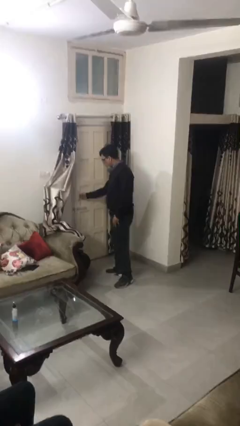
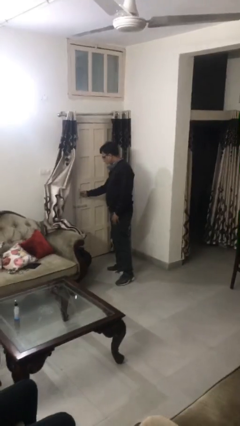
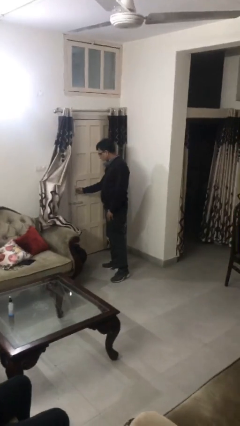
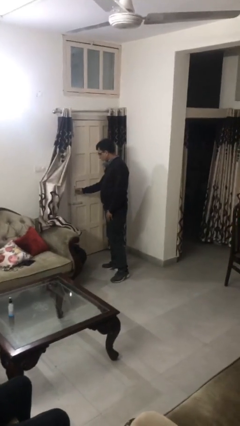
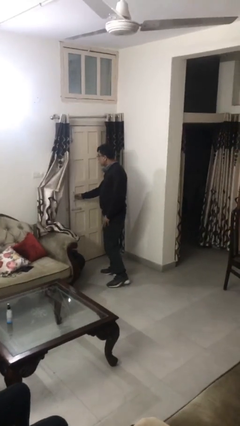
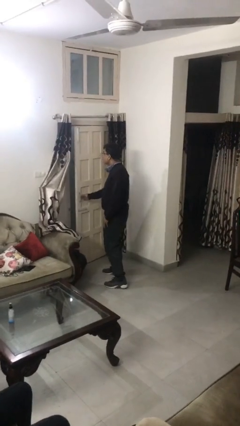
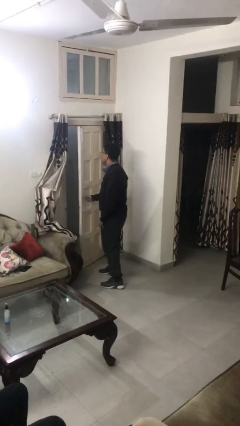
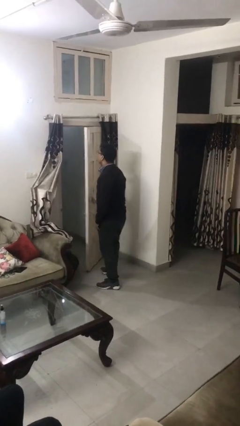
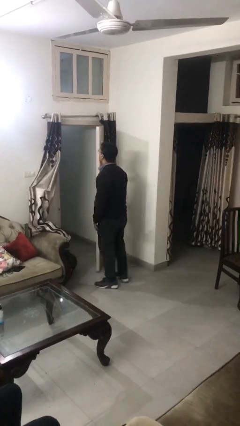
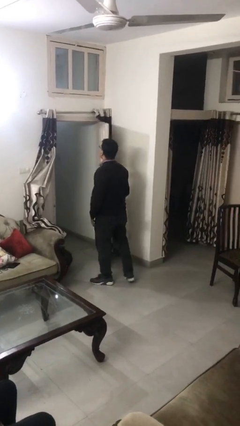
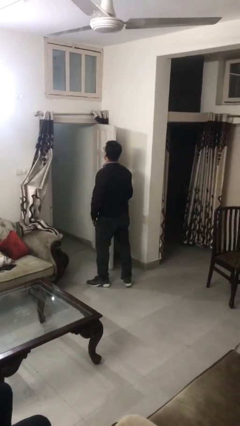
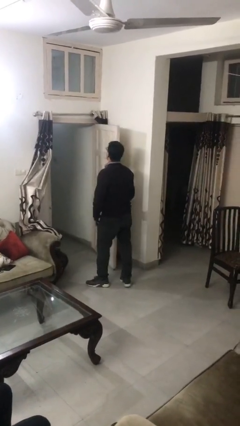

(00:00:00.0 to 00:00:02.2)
person opens facility door

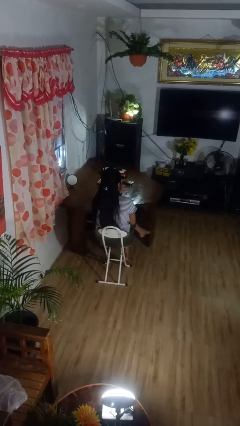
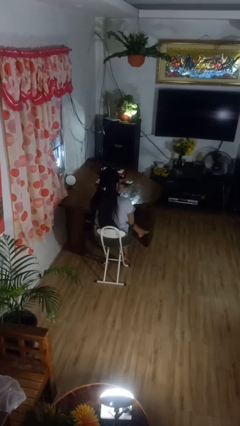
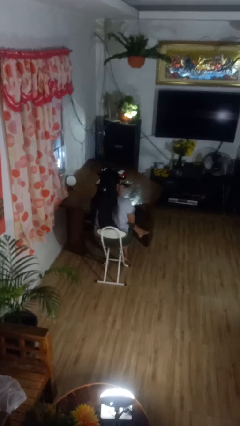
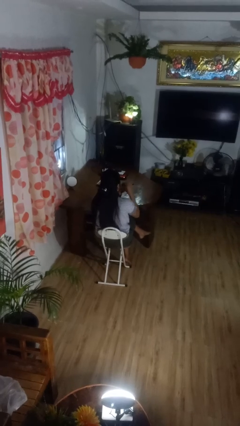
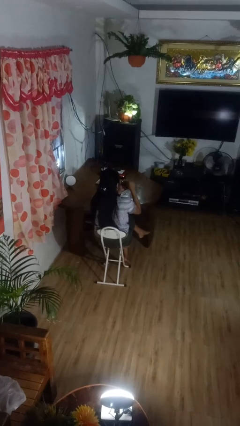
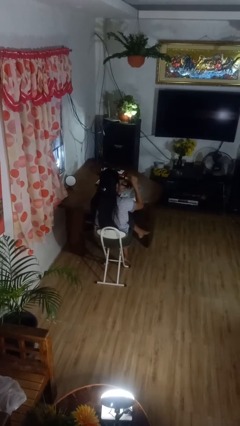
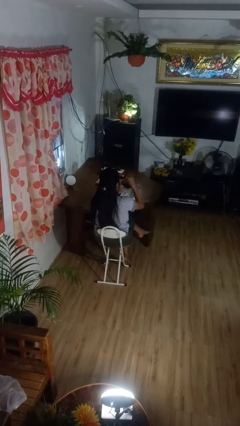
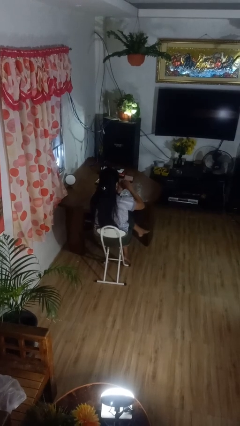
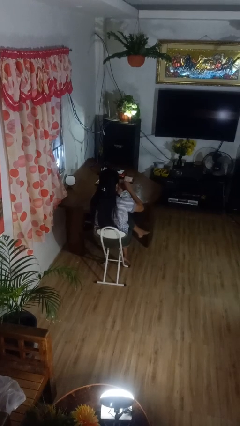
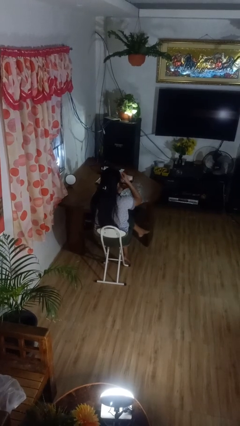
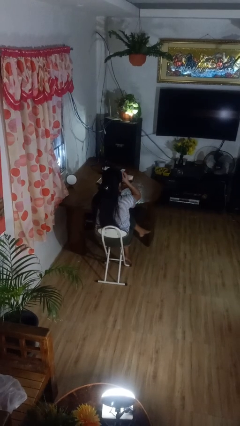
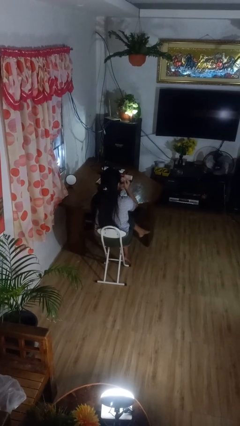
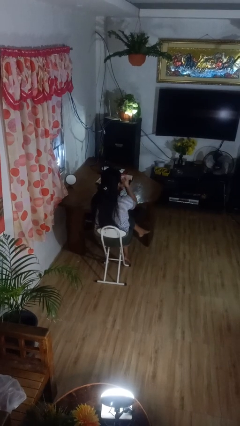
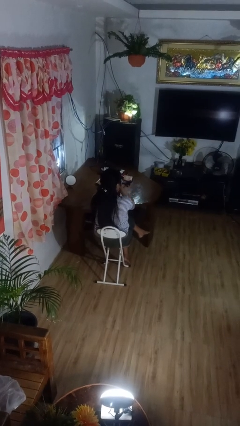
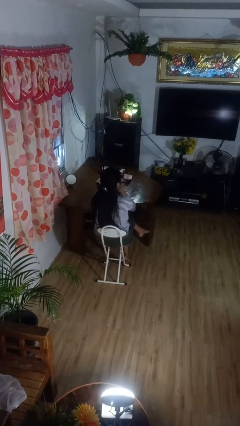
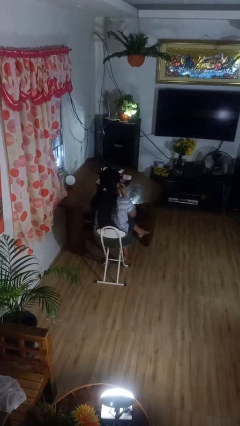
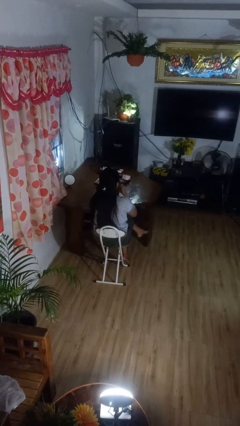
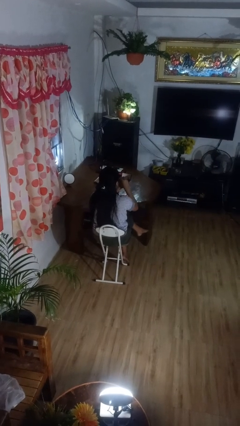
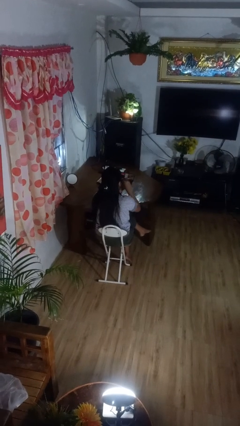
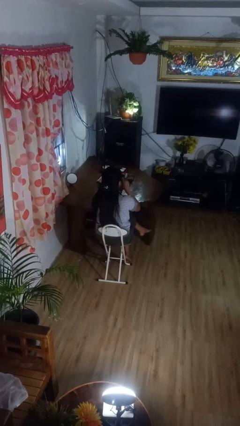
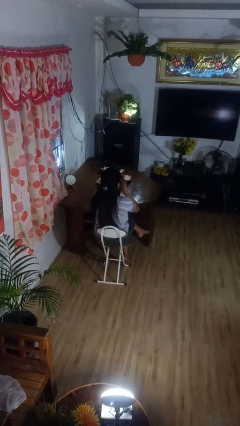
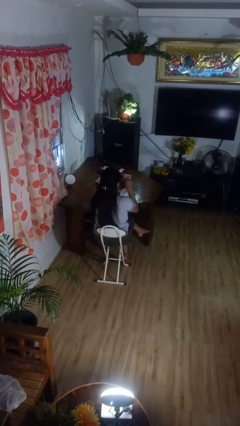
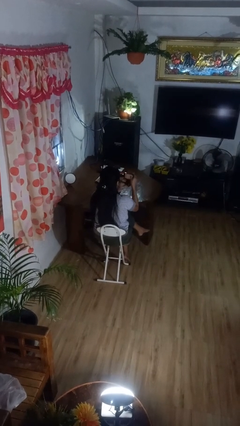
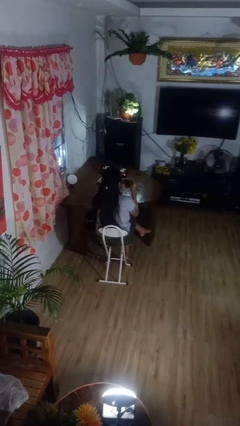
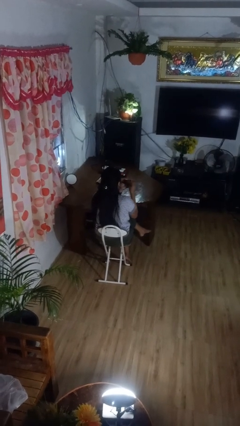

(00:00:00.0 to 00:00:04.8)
person applies foundation makeup

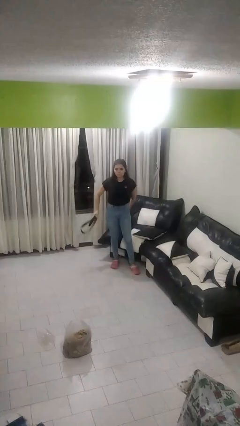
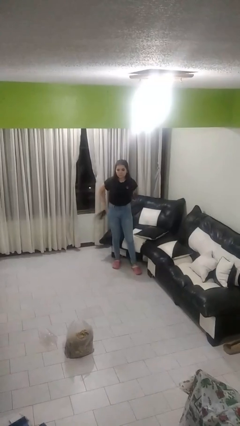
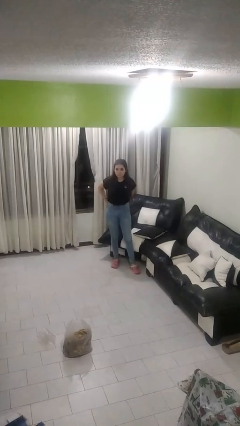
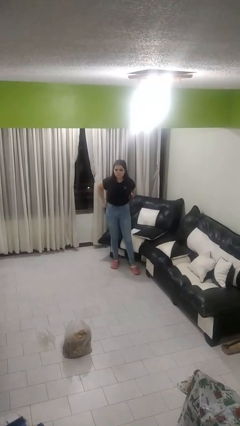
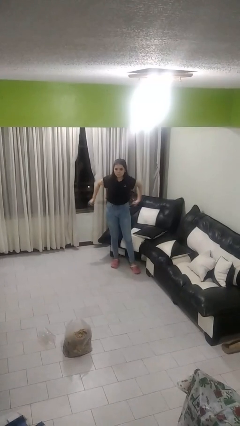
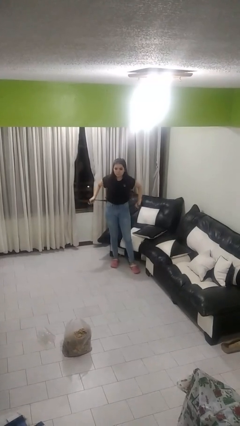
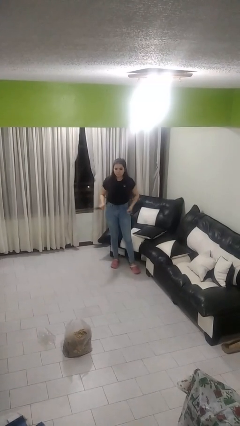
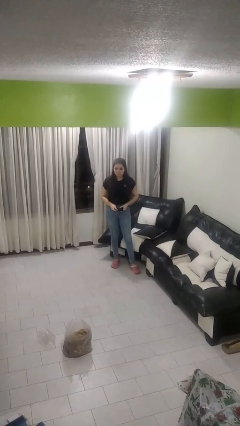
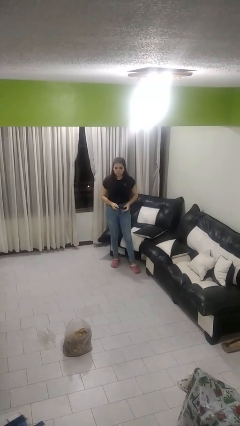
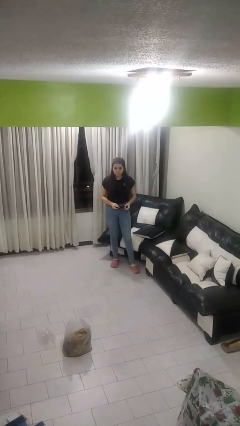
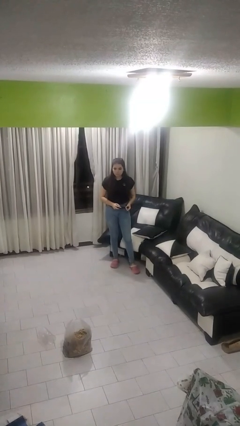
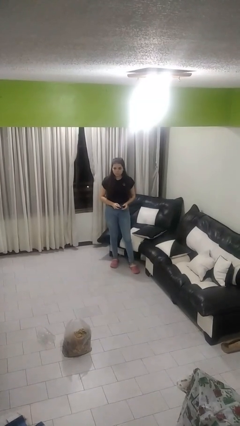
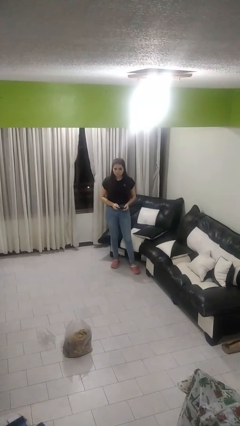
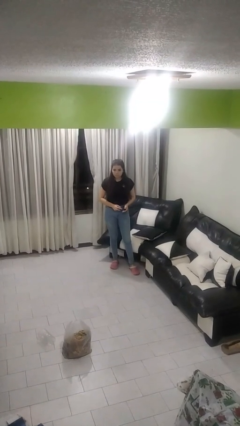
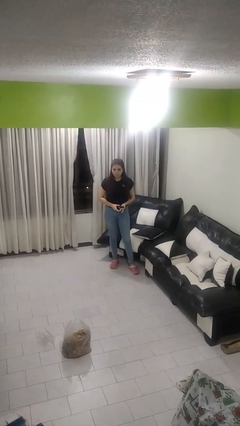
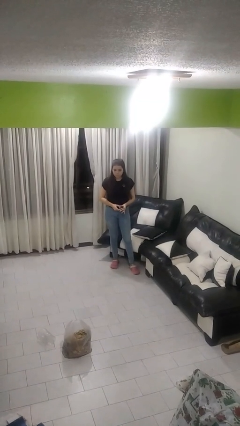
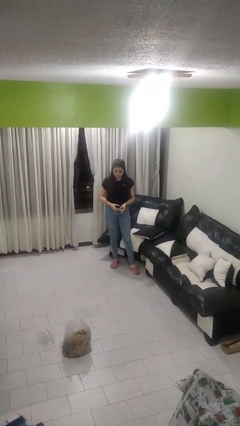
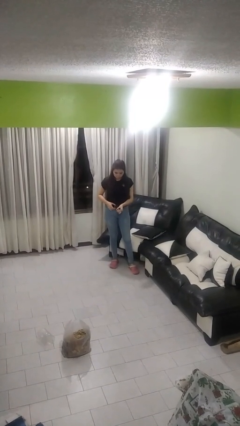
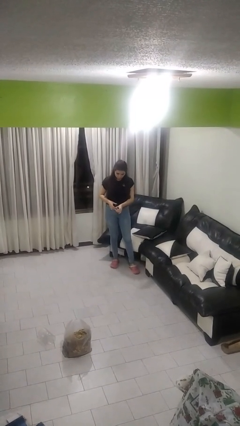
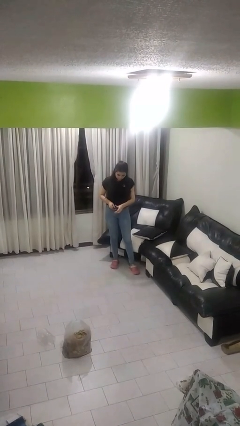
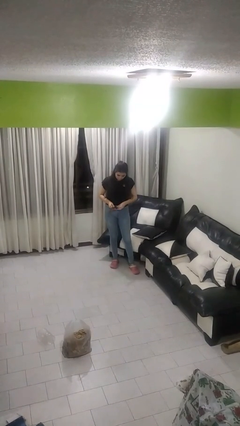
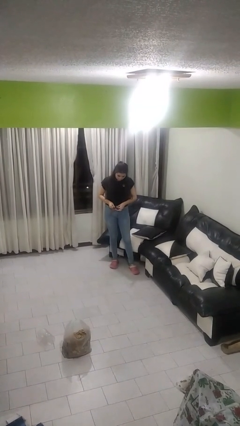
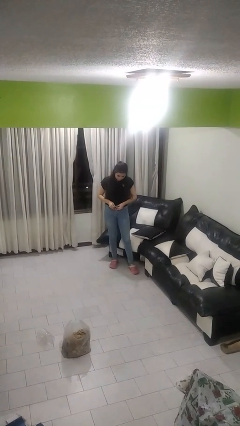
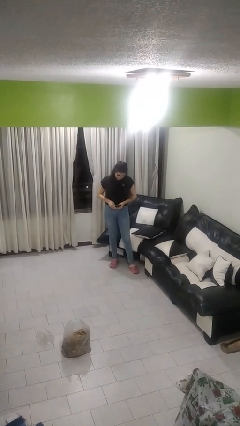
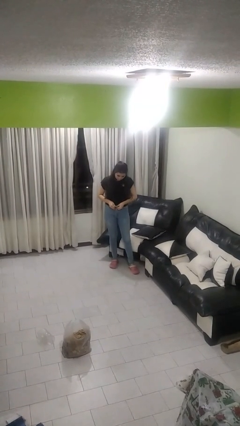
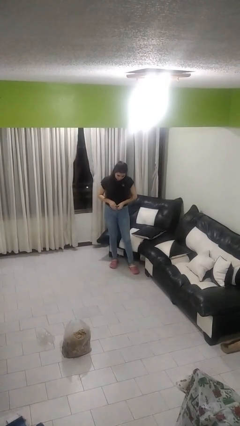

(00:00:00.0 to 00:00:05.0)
person puts on belt

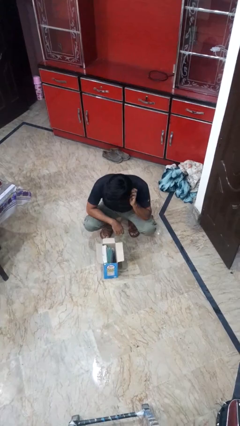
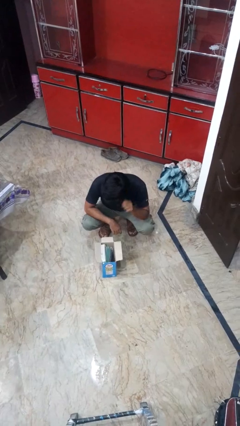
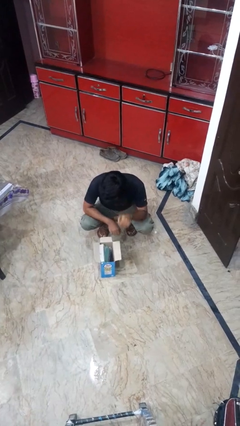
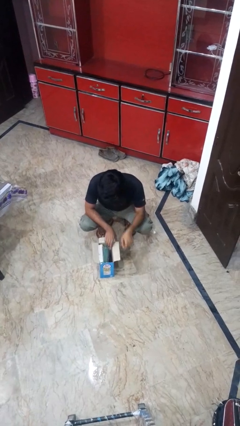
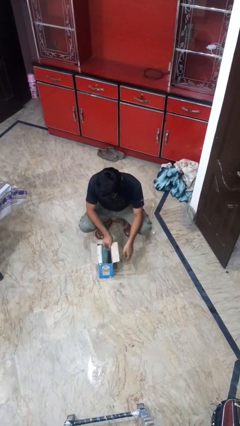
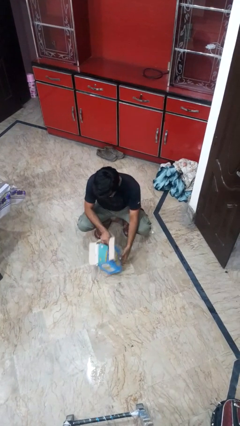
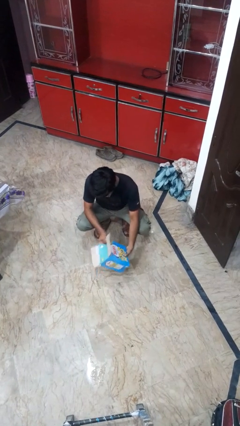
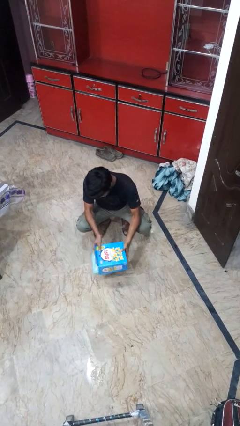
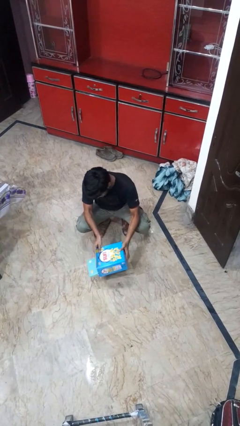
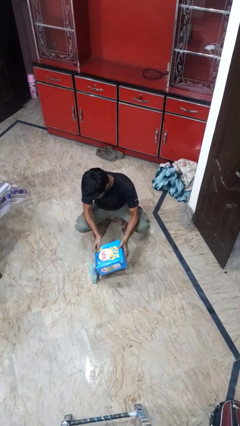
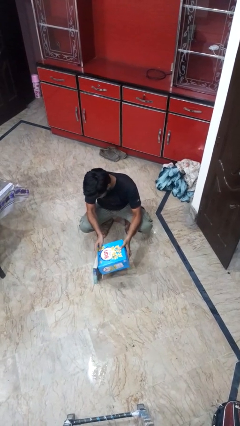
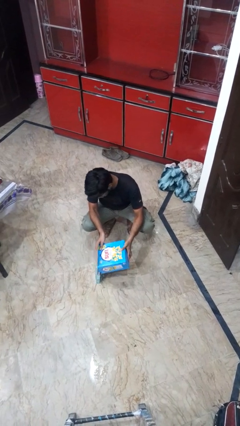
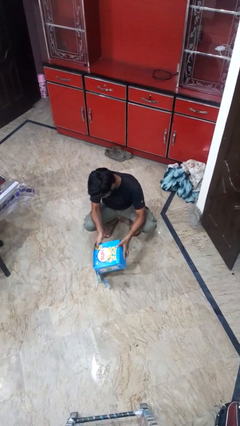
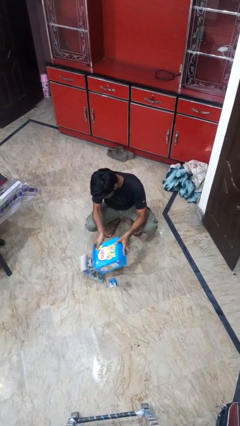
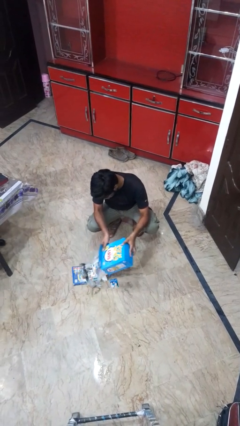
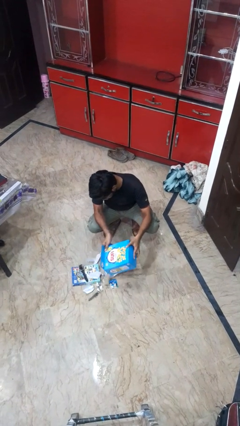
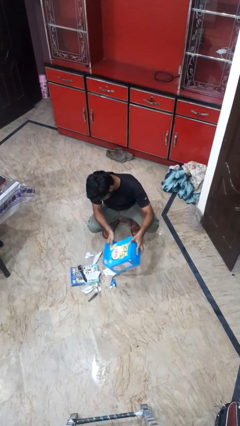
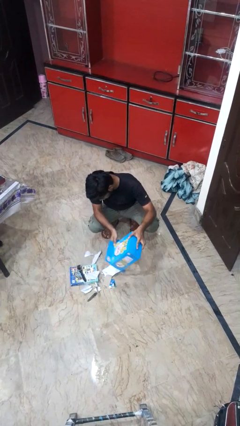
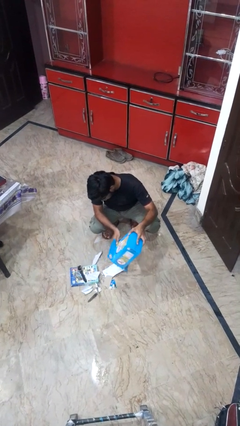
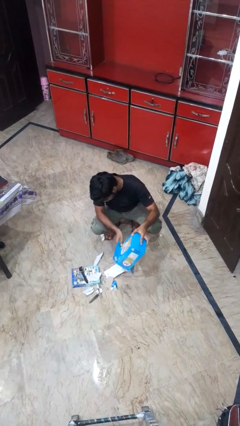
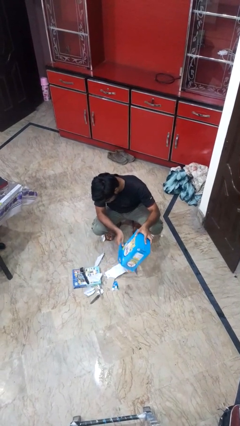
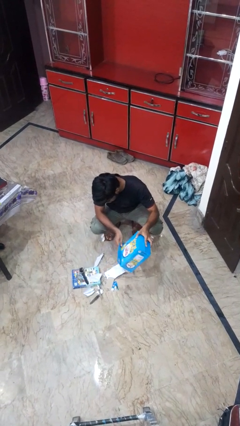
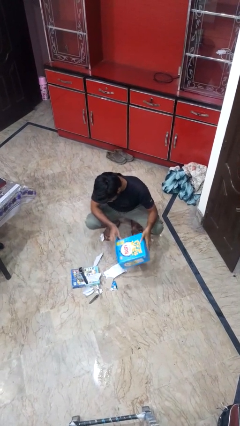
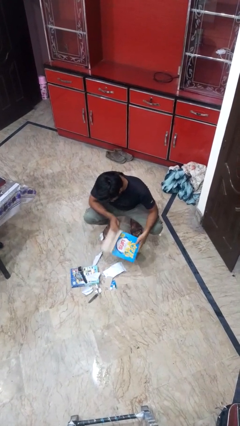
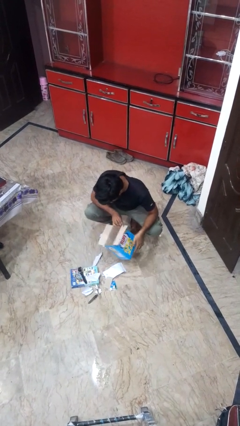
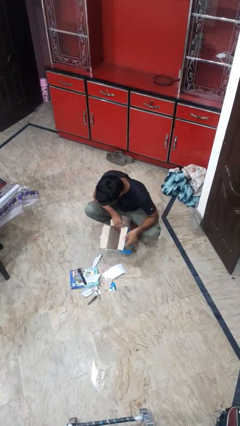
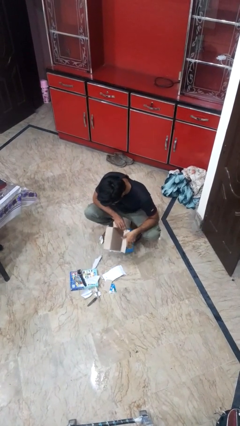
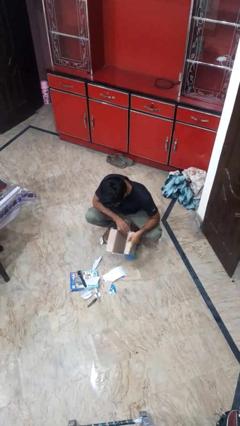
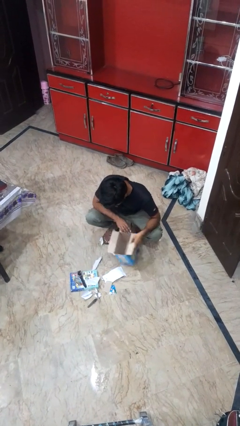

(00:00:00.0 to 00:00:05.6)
person unloads box onto floor

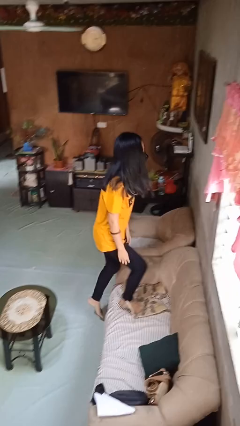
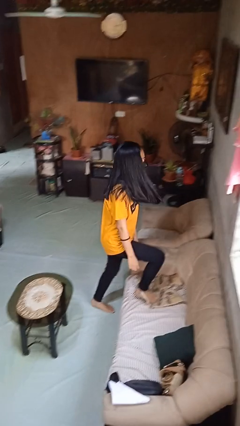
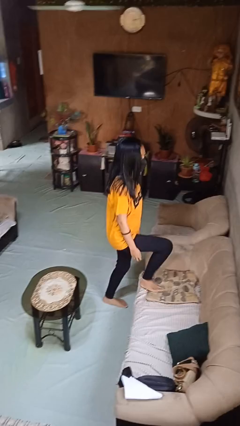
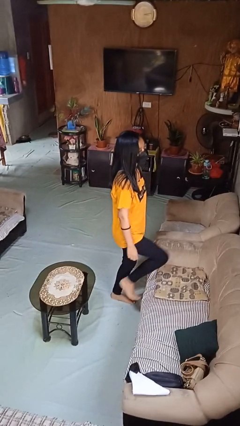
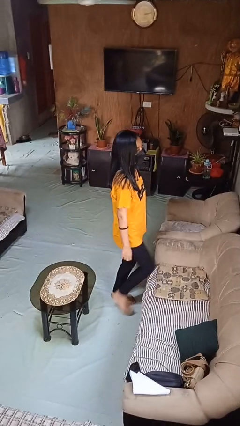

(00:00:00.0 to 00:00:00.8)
person climbs off couch
